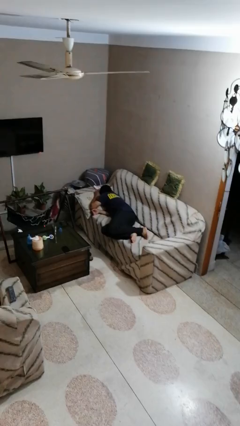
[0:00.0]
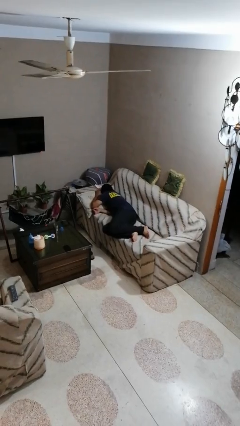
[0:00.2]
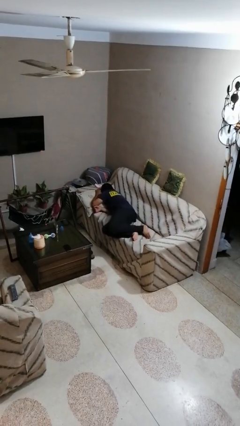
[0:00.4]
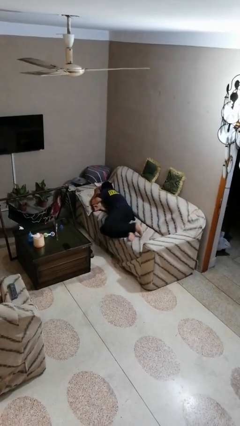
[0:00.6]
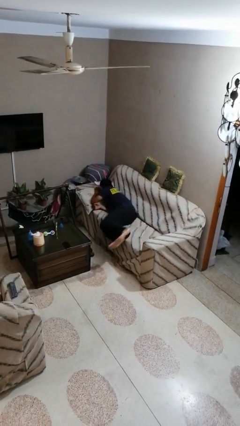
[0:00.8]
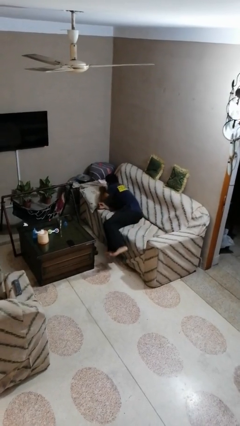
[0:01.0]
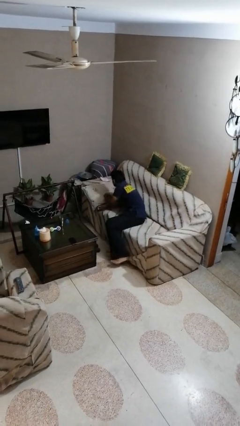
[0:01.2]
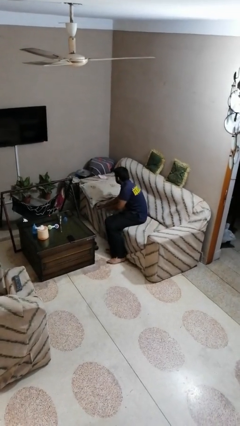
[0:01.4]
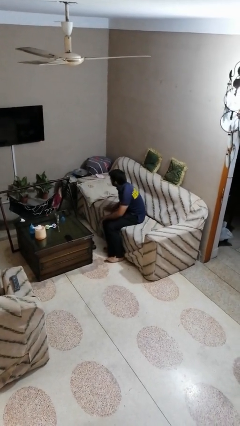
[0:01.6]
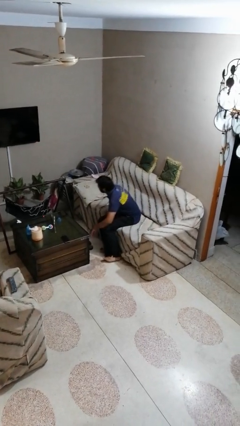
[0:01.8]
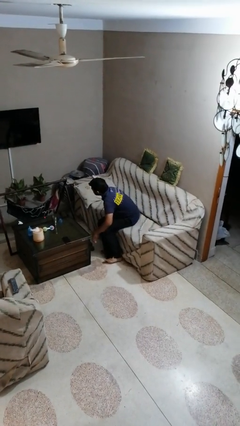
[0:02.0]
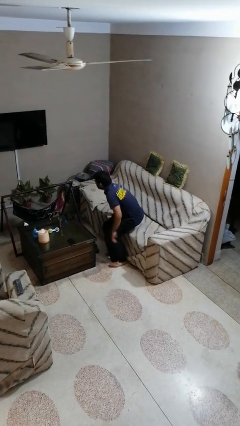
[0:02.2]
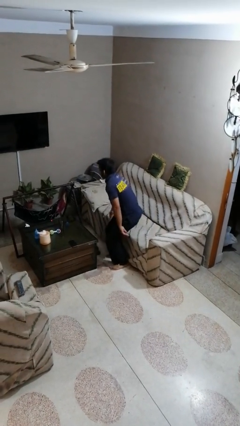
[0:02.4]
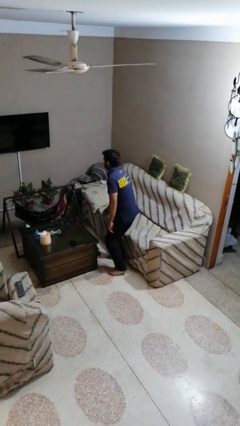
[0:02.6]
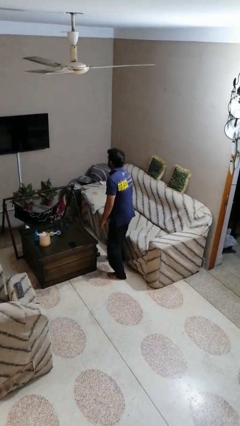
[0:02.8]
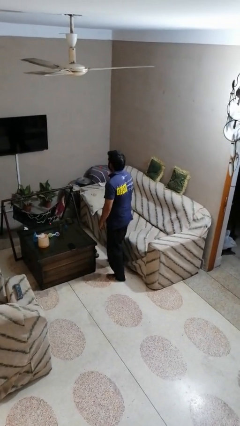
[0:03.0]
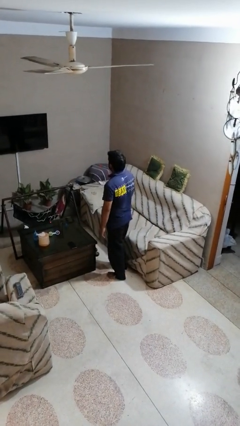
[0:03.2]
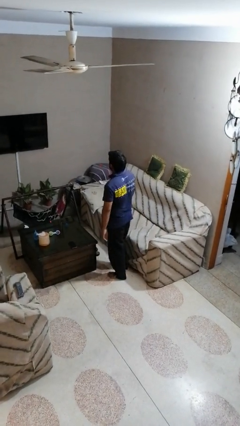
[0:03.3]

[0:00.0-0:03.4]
person stands up

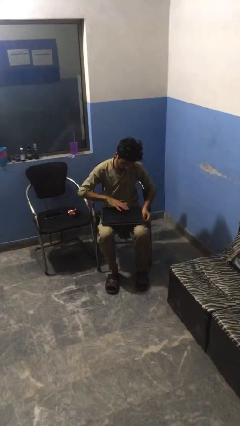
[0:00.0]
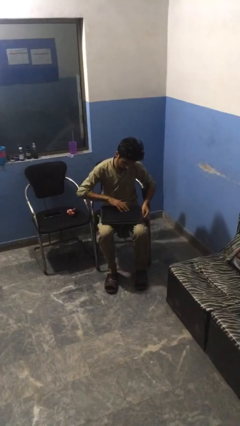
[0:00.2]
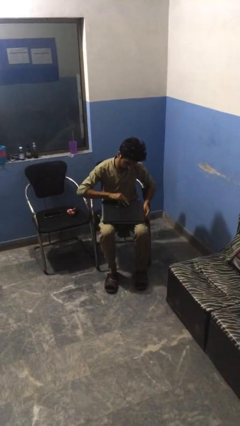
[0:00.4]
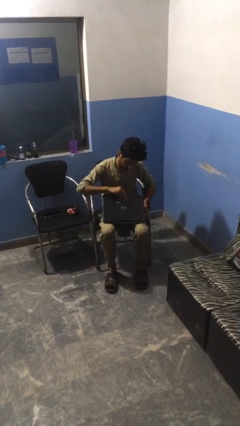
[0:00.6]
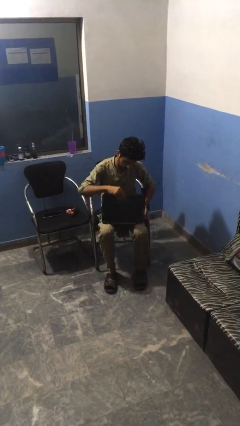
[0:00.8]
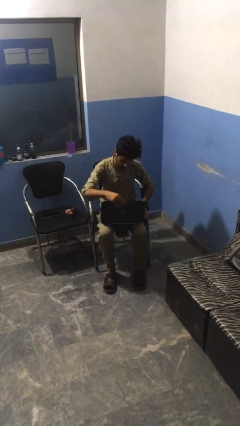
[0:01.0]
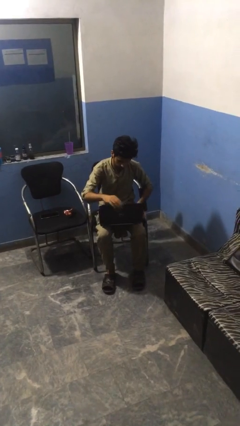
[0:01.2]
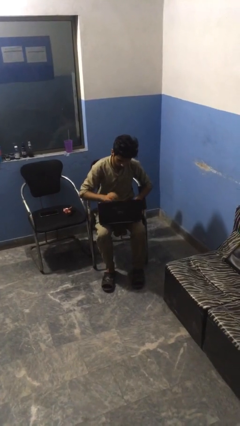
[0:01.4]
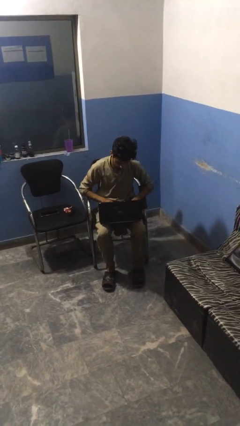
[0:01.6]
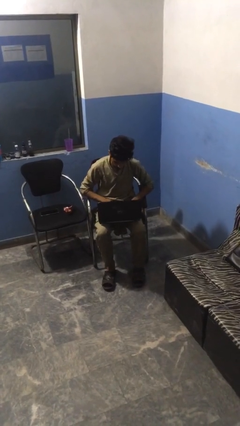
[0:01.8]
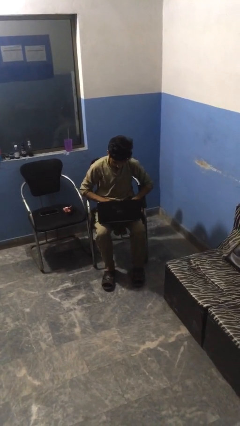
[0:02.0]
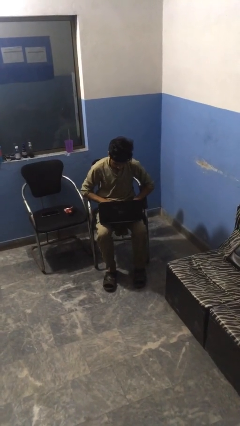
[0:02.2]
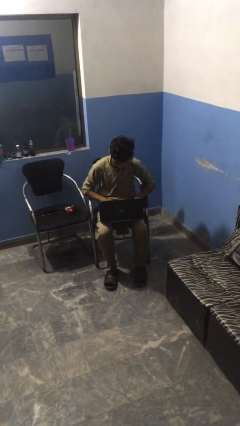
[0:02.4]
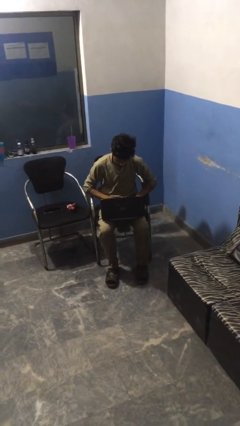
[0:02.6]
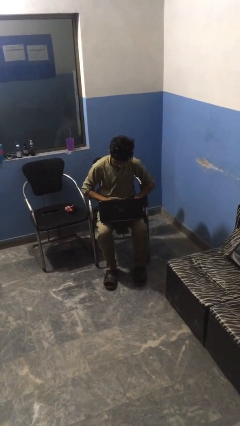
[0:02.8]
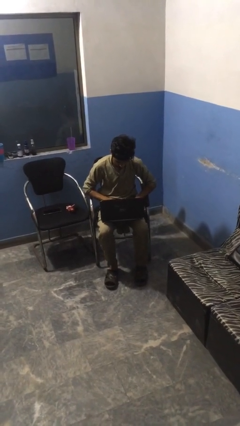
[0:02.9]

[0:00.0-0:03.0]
person opens laptop

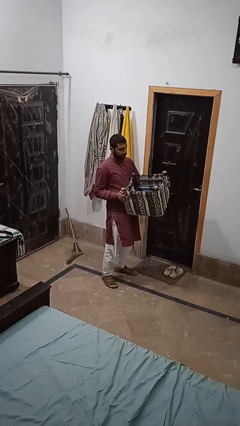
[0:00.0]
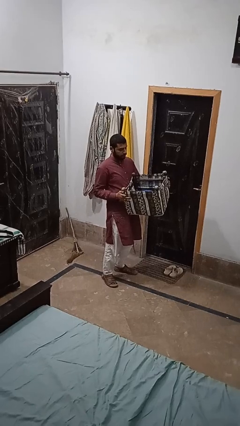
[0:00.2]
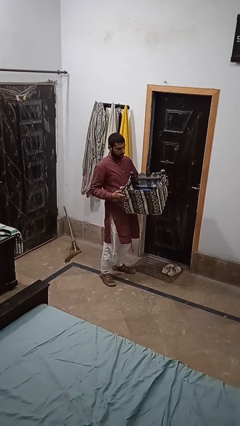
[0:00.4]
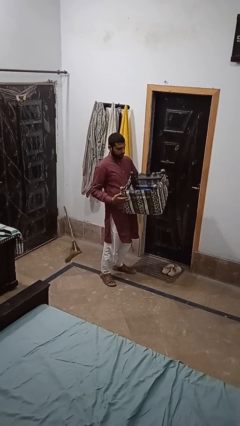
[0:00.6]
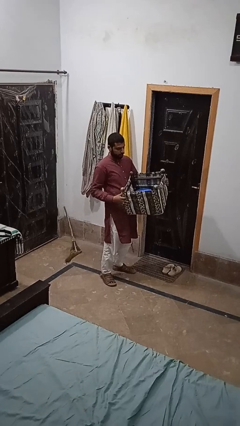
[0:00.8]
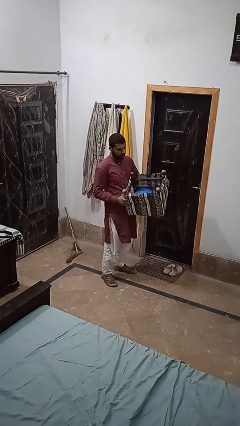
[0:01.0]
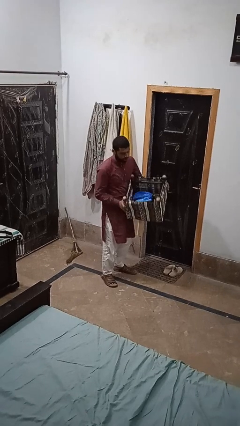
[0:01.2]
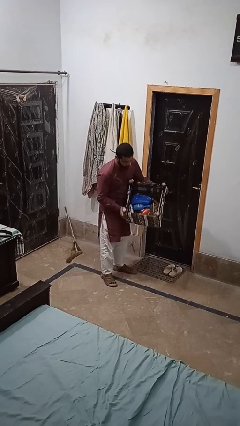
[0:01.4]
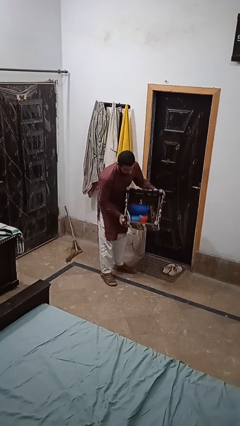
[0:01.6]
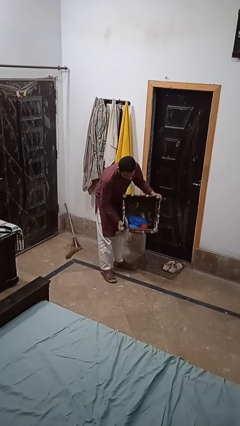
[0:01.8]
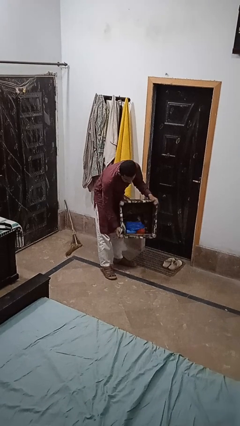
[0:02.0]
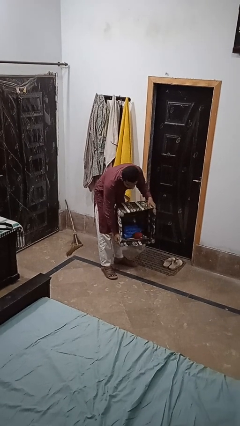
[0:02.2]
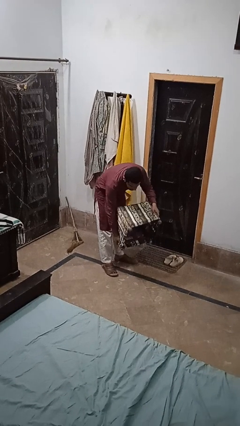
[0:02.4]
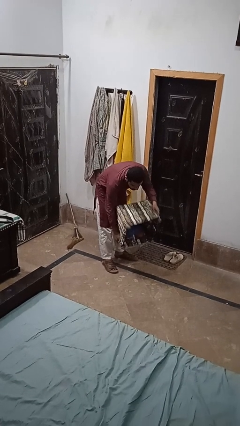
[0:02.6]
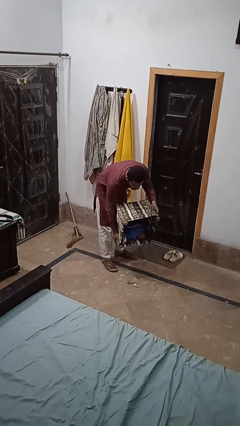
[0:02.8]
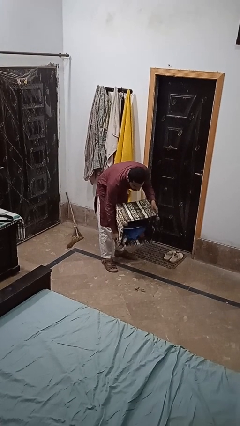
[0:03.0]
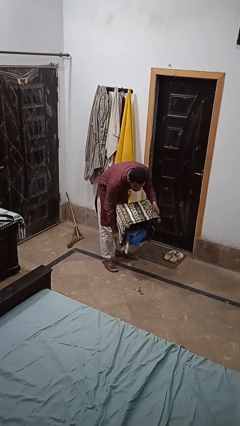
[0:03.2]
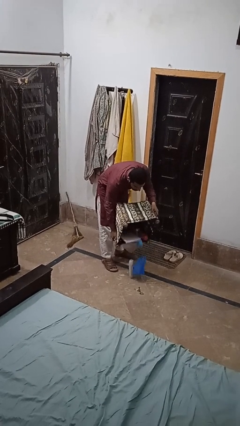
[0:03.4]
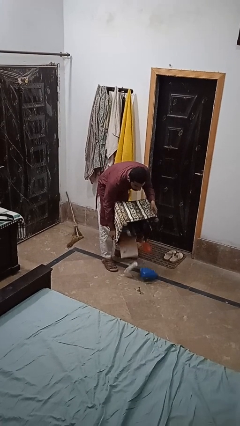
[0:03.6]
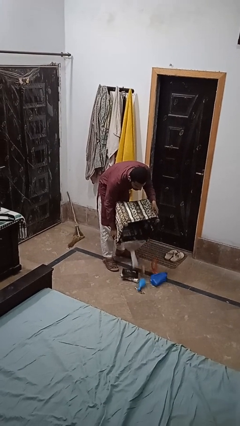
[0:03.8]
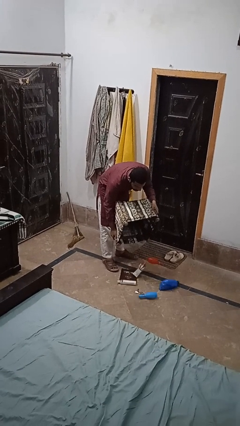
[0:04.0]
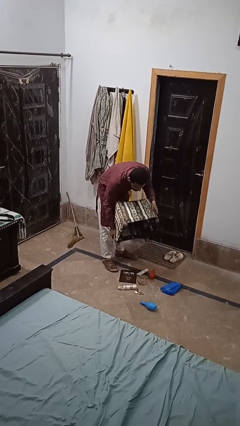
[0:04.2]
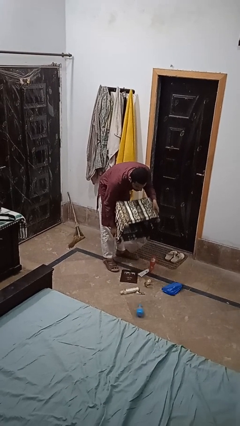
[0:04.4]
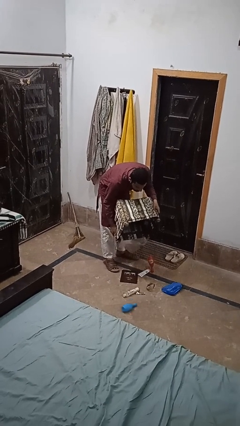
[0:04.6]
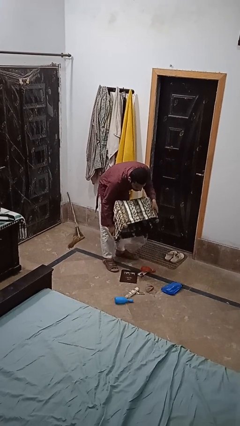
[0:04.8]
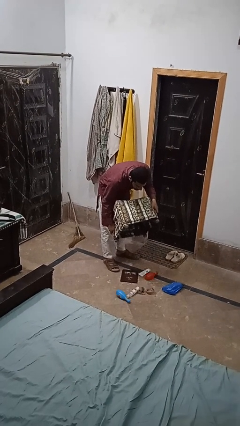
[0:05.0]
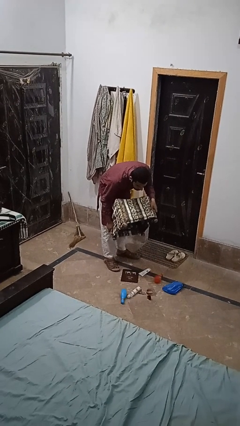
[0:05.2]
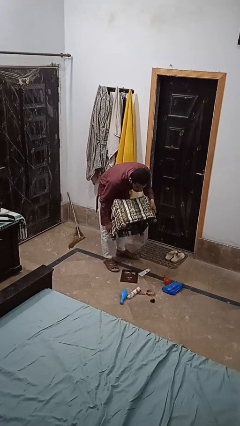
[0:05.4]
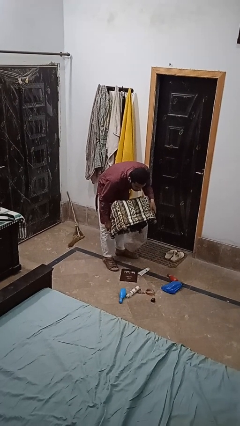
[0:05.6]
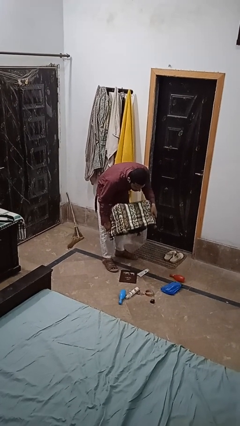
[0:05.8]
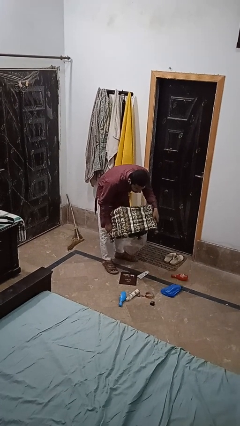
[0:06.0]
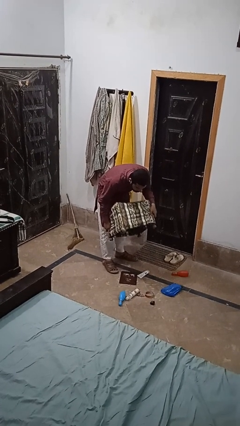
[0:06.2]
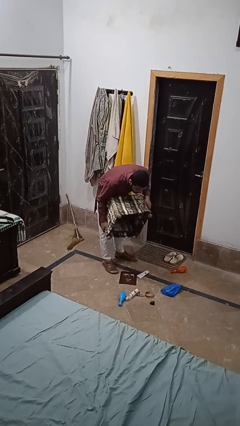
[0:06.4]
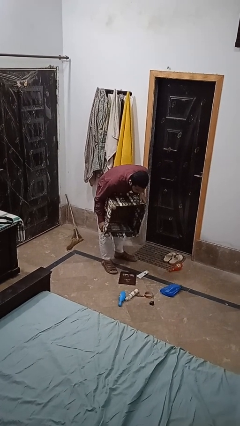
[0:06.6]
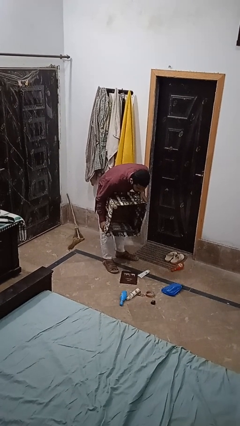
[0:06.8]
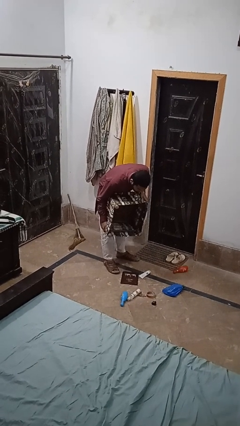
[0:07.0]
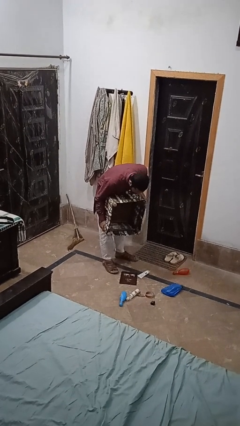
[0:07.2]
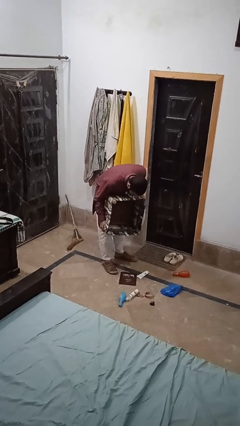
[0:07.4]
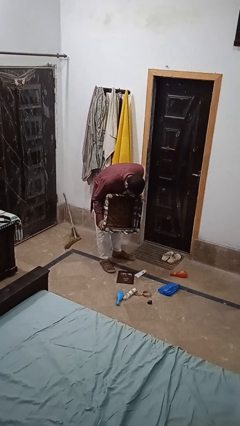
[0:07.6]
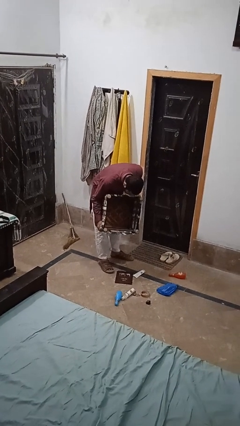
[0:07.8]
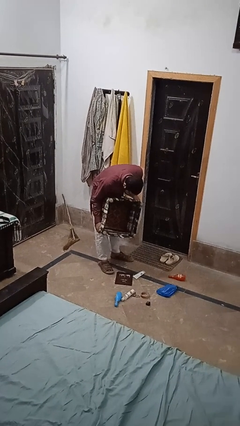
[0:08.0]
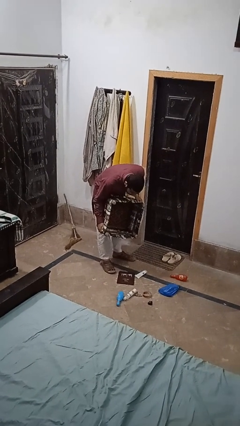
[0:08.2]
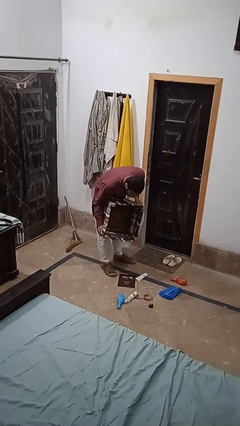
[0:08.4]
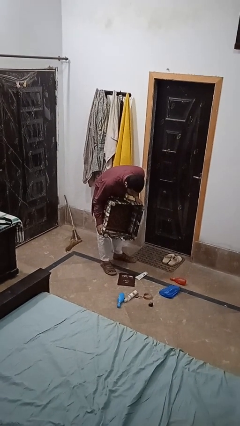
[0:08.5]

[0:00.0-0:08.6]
person unloads box onto floor

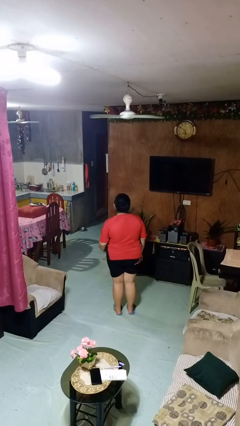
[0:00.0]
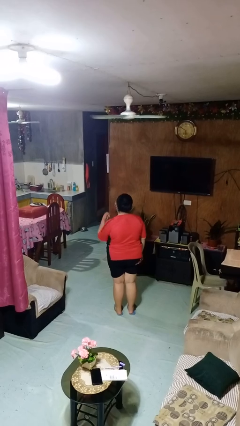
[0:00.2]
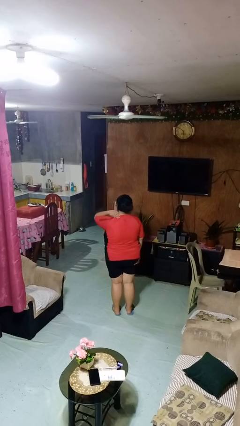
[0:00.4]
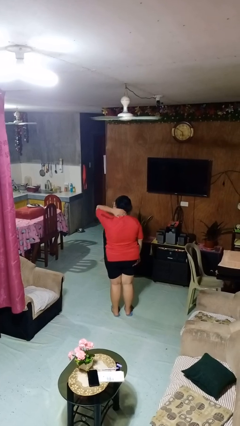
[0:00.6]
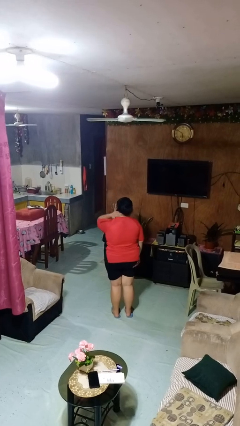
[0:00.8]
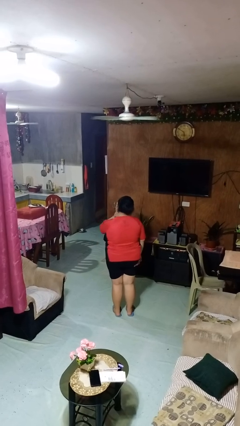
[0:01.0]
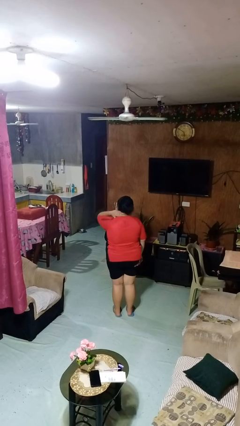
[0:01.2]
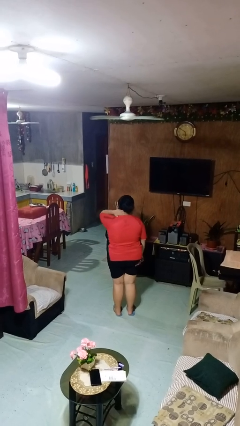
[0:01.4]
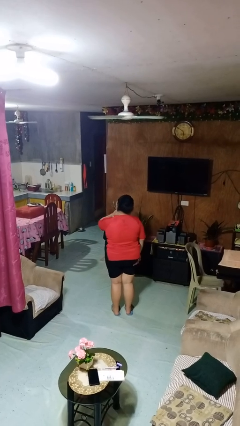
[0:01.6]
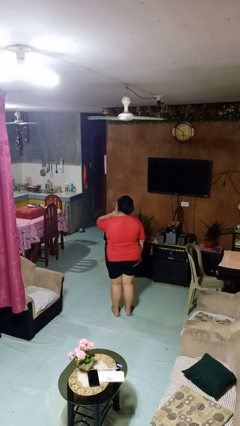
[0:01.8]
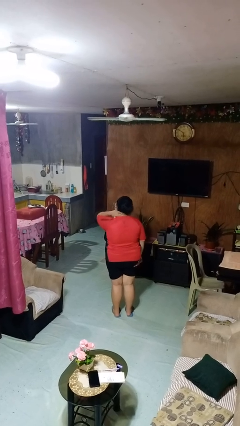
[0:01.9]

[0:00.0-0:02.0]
person rubs neck

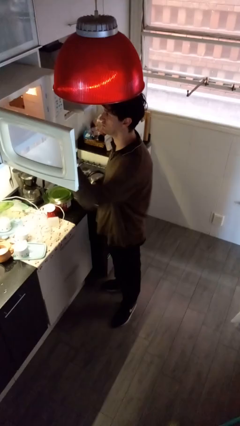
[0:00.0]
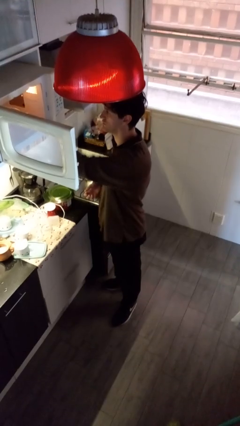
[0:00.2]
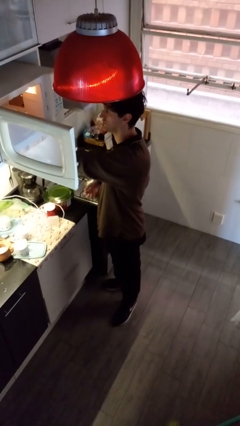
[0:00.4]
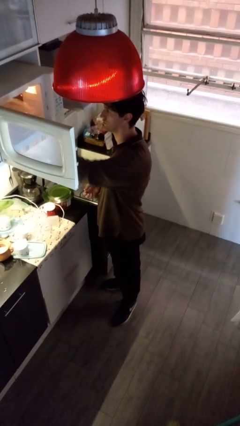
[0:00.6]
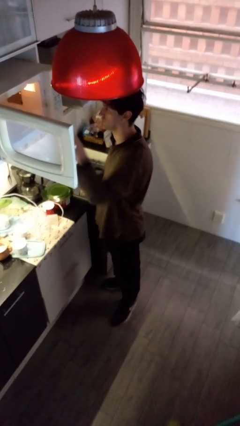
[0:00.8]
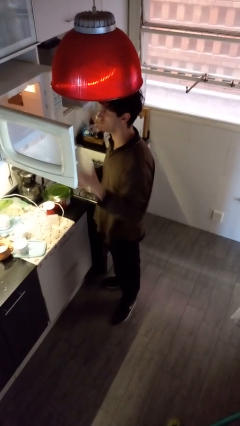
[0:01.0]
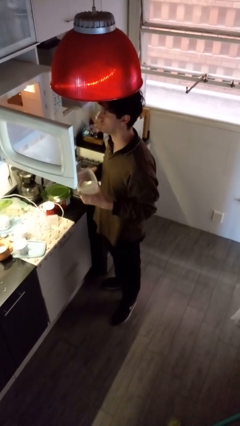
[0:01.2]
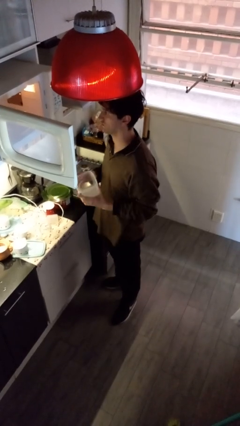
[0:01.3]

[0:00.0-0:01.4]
person takes object from microwave
